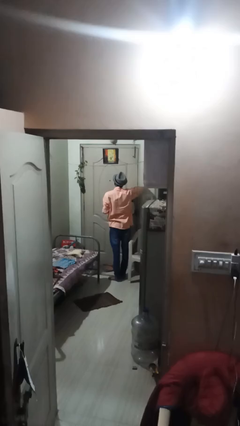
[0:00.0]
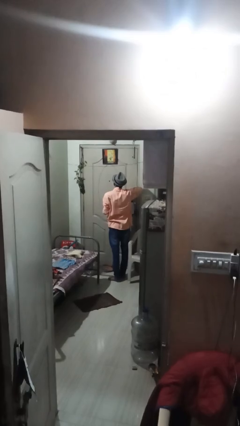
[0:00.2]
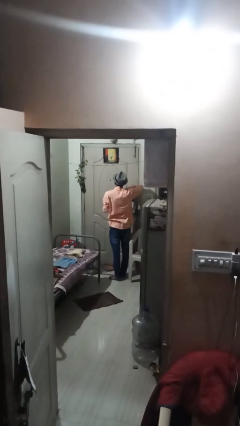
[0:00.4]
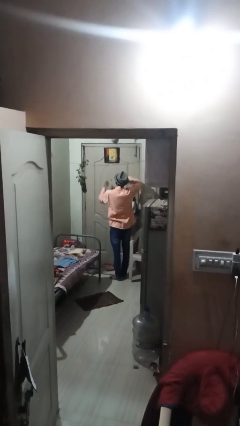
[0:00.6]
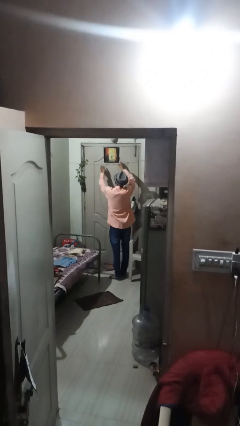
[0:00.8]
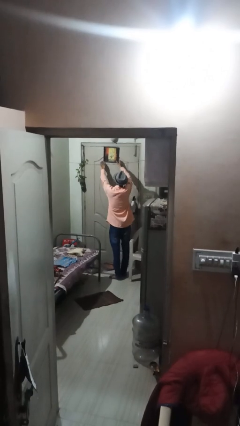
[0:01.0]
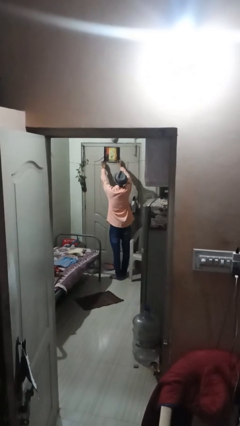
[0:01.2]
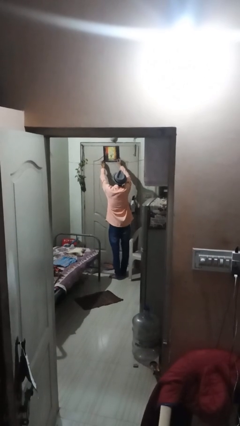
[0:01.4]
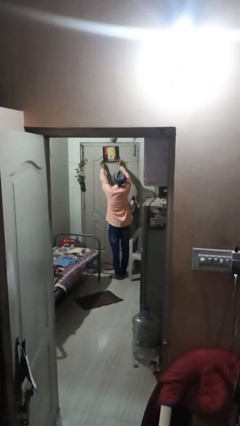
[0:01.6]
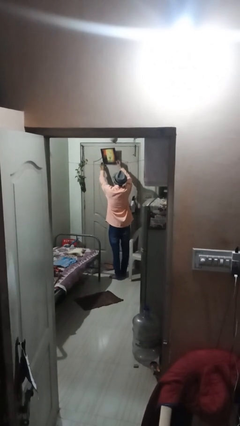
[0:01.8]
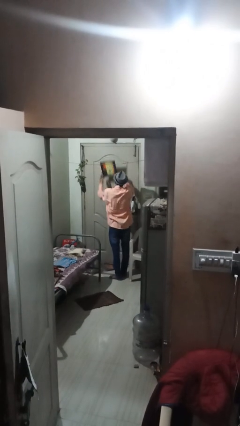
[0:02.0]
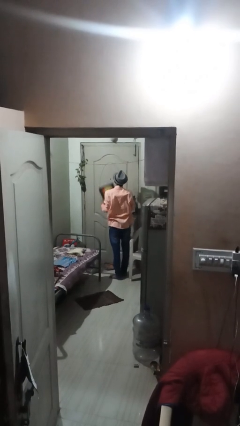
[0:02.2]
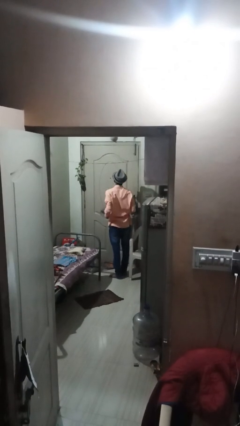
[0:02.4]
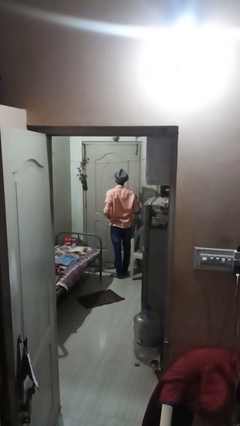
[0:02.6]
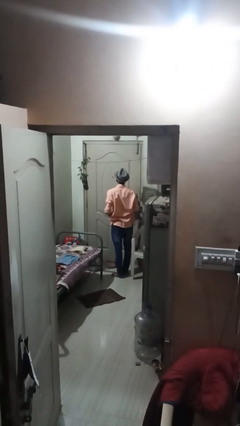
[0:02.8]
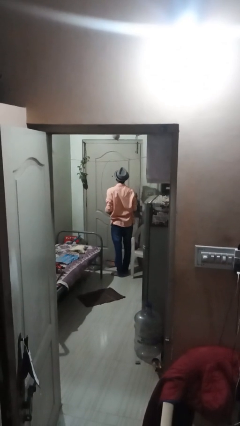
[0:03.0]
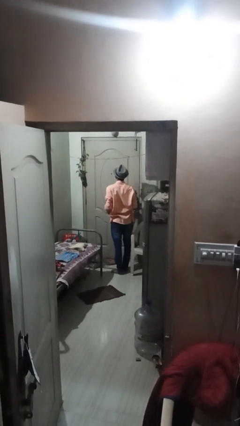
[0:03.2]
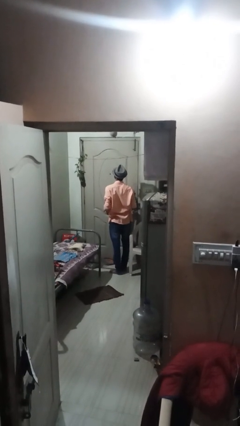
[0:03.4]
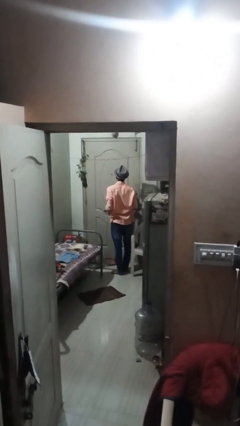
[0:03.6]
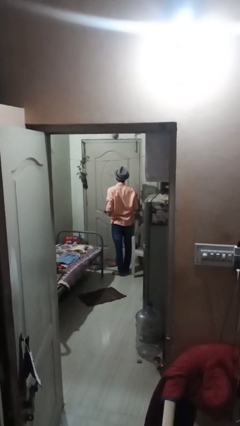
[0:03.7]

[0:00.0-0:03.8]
person takes down picture frame

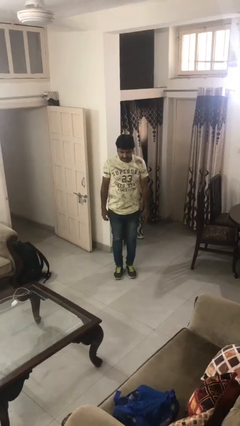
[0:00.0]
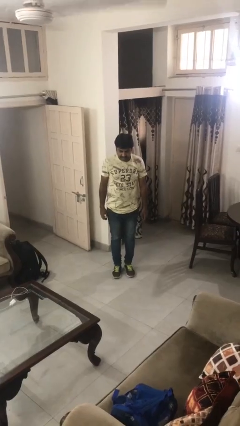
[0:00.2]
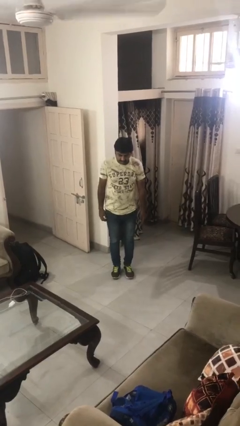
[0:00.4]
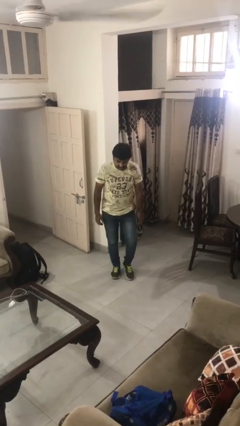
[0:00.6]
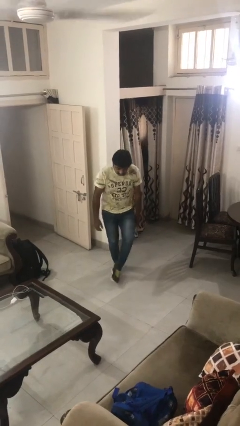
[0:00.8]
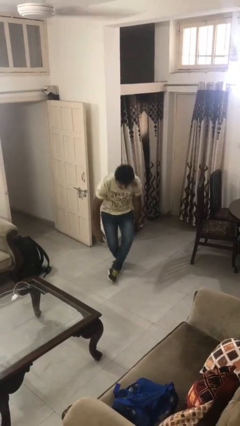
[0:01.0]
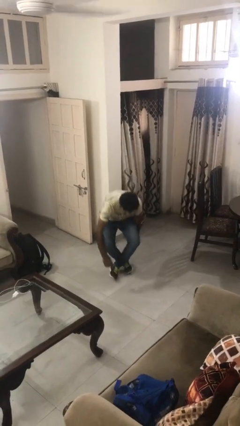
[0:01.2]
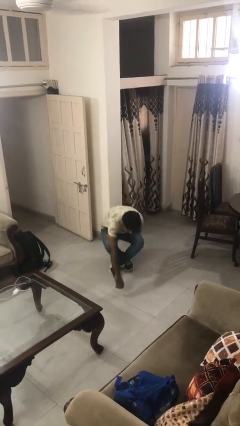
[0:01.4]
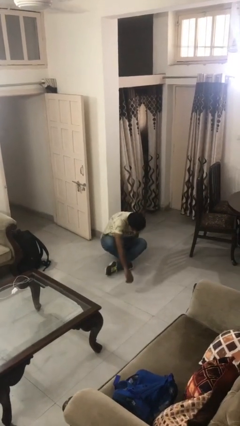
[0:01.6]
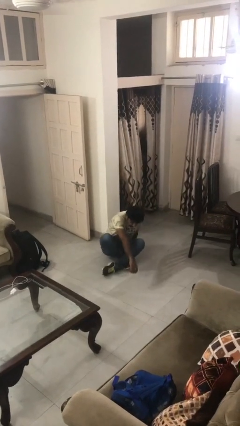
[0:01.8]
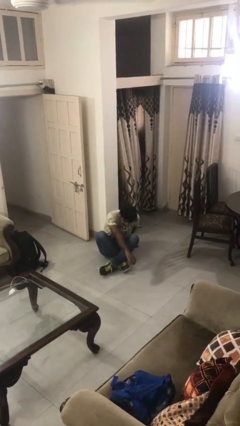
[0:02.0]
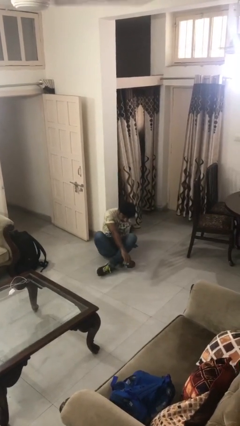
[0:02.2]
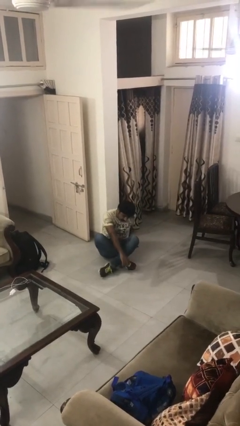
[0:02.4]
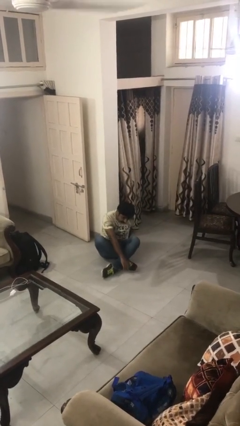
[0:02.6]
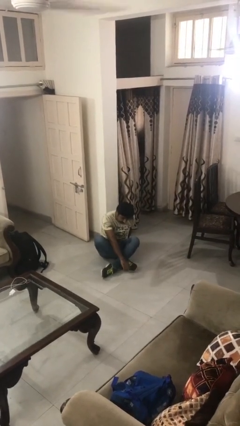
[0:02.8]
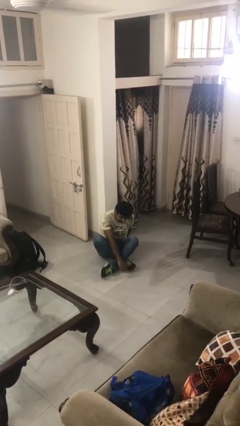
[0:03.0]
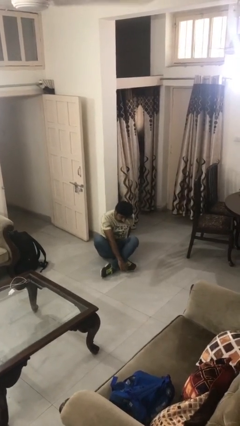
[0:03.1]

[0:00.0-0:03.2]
person sits crisscross

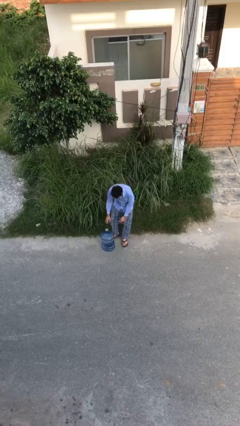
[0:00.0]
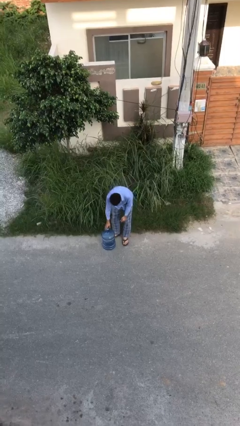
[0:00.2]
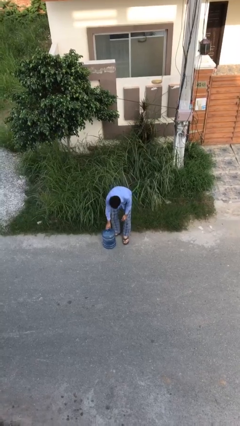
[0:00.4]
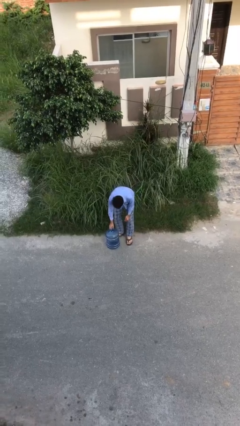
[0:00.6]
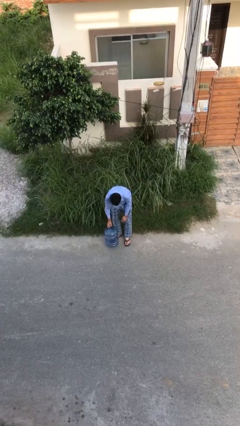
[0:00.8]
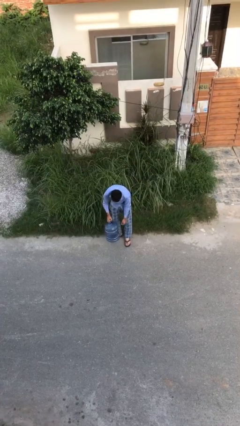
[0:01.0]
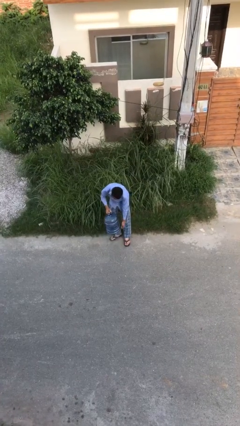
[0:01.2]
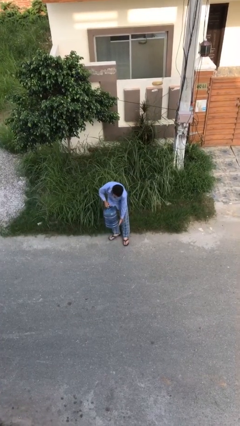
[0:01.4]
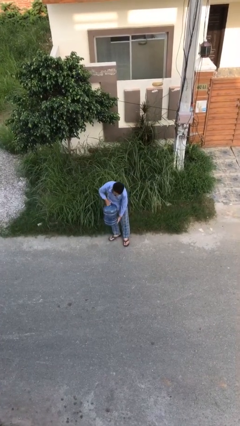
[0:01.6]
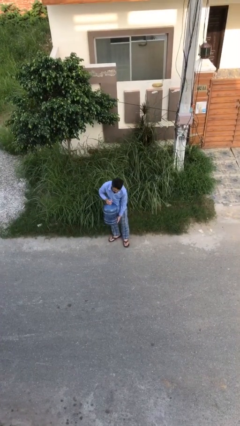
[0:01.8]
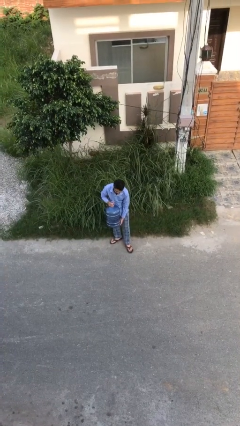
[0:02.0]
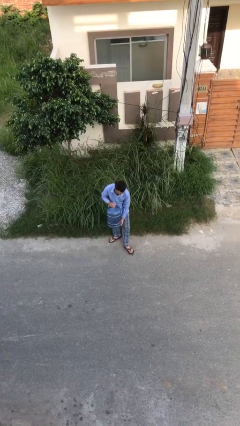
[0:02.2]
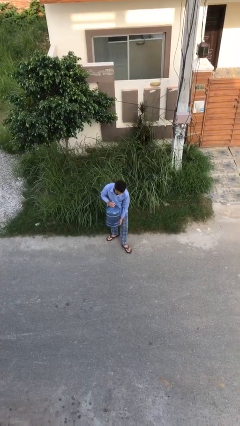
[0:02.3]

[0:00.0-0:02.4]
person picks up object from floor

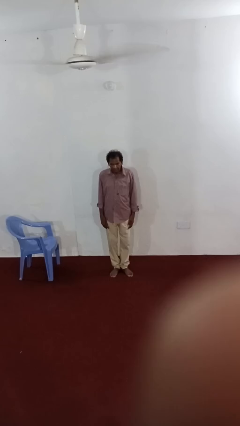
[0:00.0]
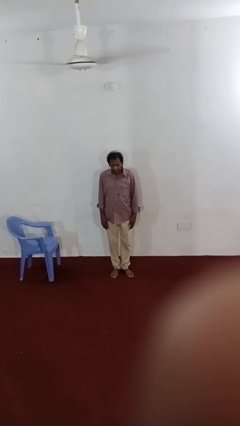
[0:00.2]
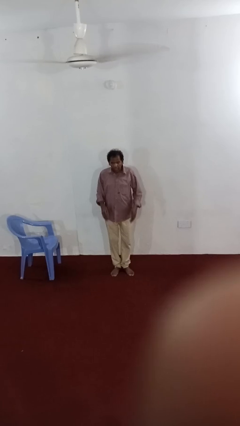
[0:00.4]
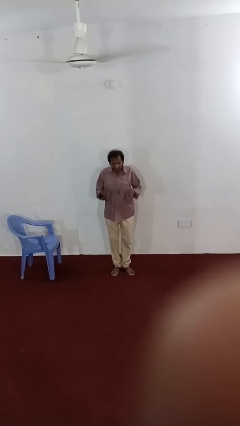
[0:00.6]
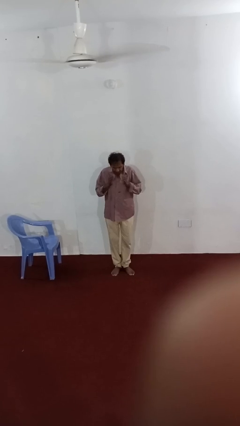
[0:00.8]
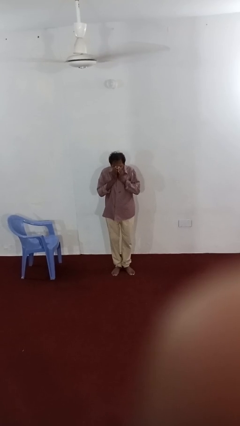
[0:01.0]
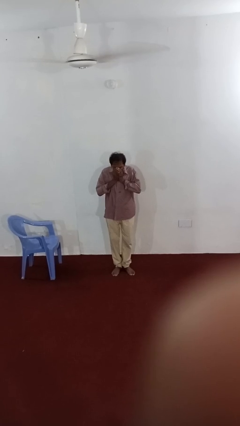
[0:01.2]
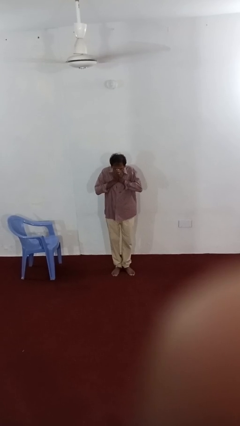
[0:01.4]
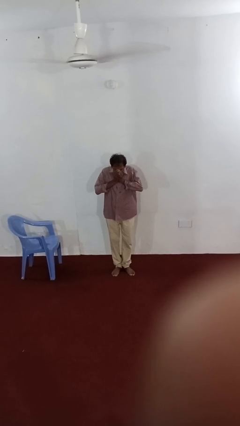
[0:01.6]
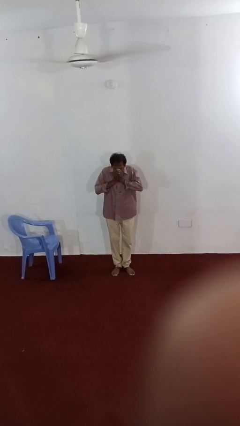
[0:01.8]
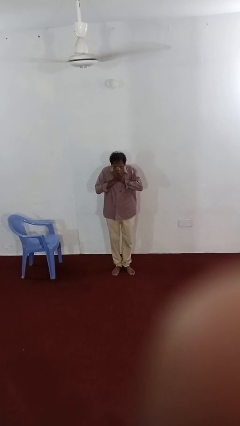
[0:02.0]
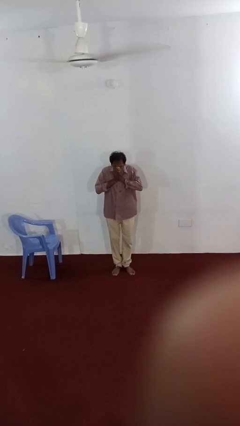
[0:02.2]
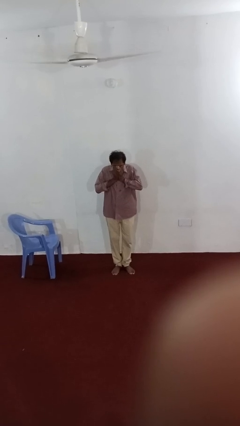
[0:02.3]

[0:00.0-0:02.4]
person sneezes into hand

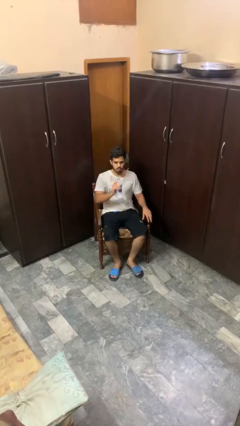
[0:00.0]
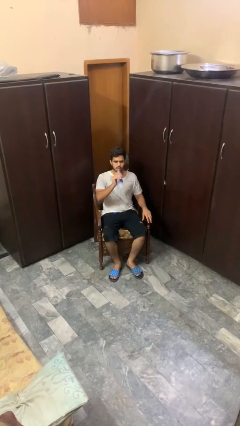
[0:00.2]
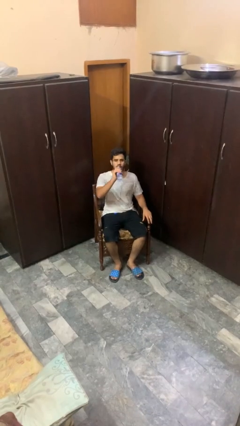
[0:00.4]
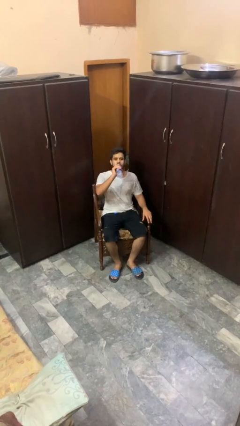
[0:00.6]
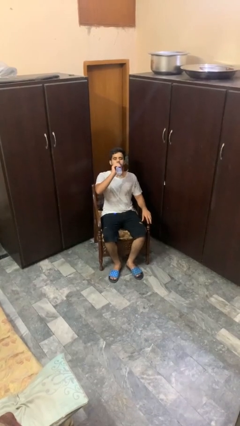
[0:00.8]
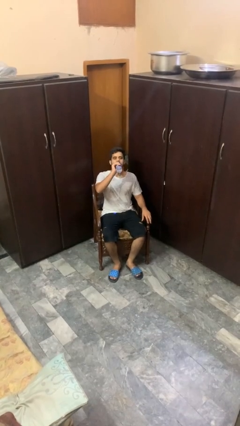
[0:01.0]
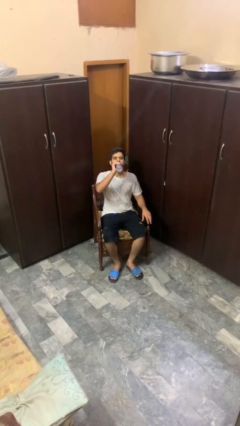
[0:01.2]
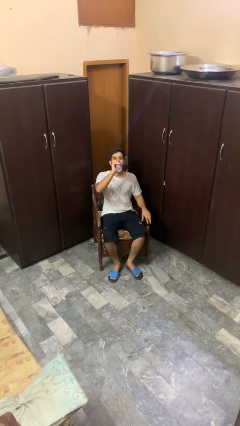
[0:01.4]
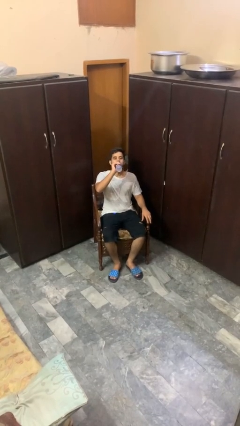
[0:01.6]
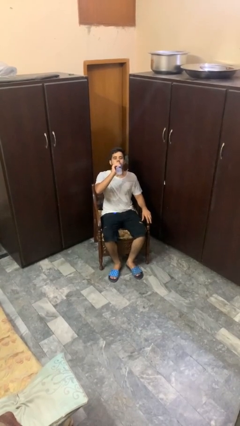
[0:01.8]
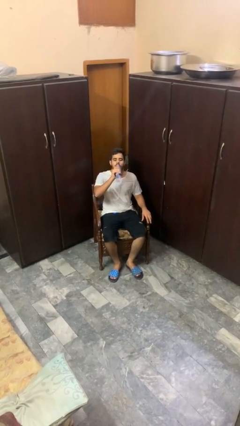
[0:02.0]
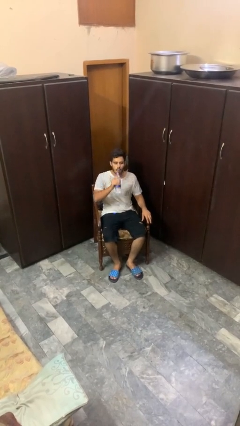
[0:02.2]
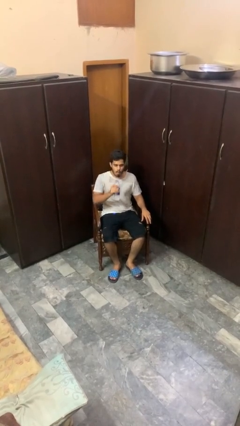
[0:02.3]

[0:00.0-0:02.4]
person drinks from bottle

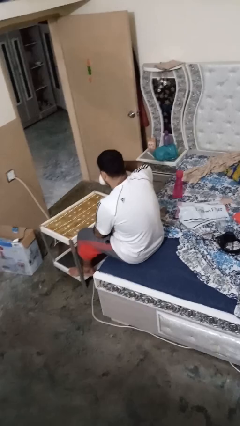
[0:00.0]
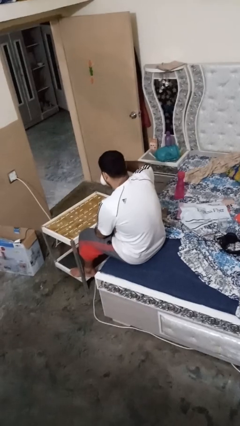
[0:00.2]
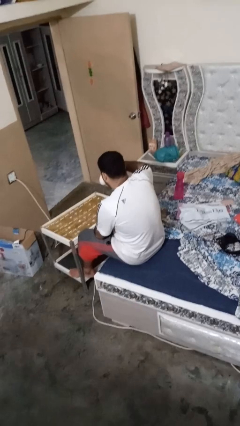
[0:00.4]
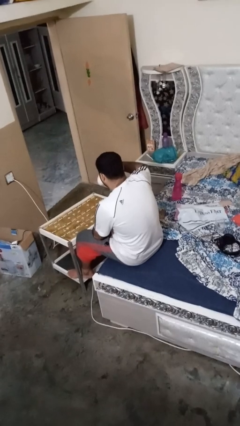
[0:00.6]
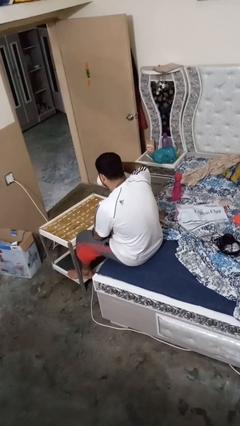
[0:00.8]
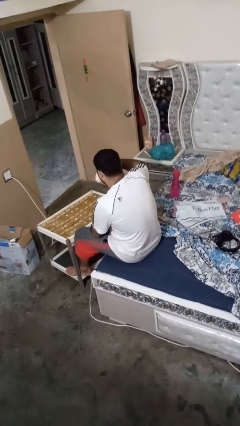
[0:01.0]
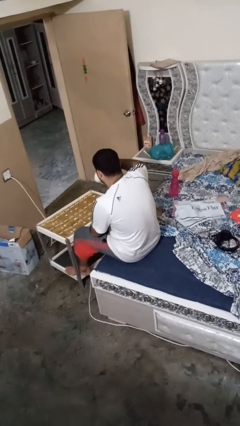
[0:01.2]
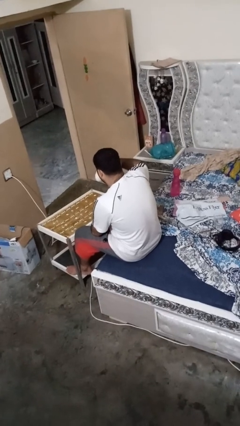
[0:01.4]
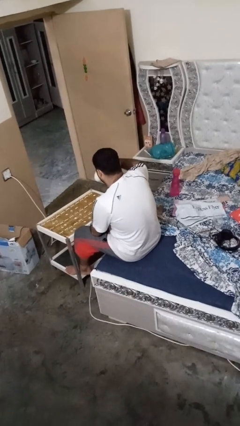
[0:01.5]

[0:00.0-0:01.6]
person drinks from mug

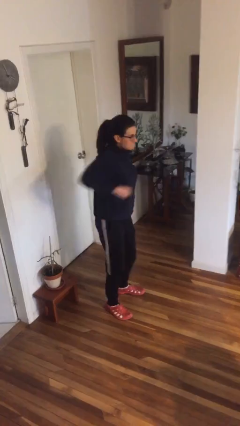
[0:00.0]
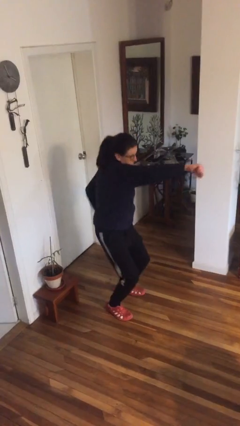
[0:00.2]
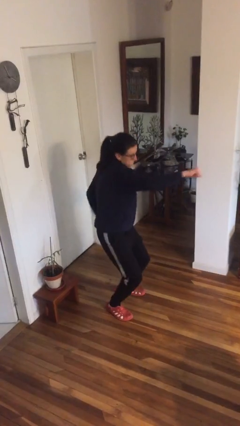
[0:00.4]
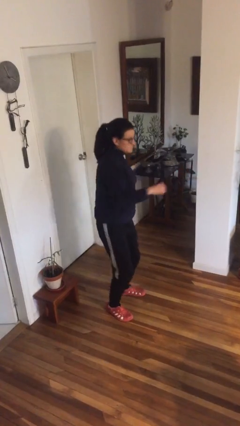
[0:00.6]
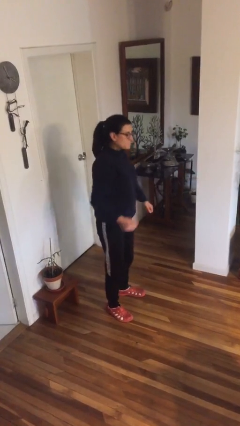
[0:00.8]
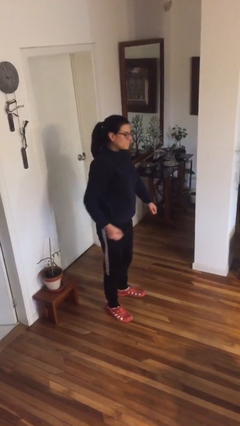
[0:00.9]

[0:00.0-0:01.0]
person punches
